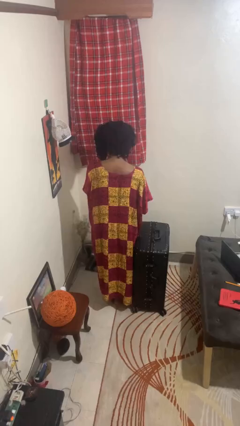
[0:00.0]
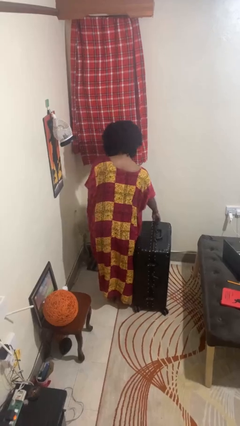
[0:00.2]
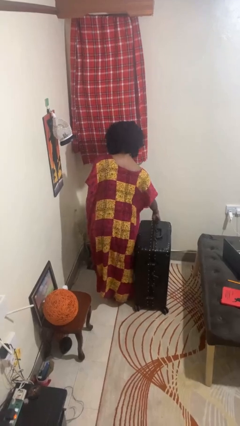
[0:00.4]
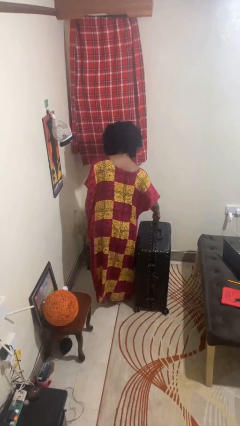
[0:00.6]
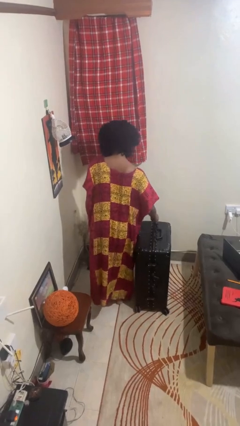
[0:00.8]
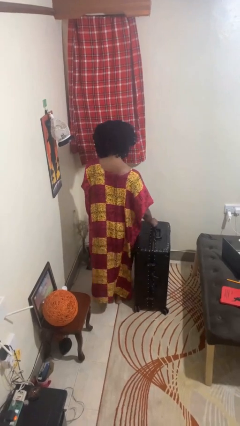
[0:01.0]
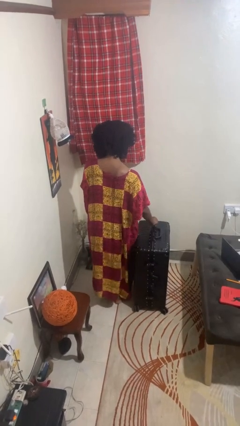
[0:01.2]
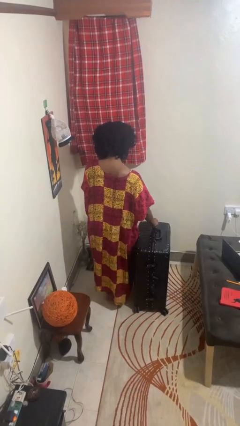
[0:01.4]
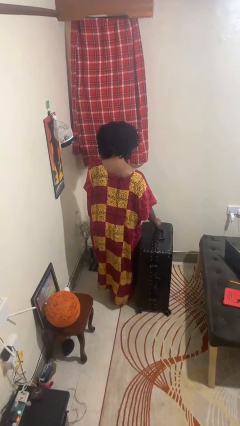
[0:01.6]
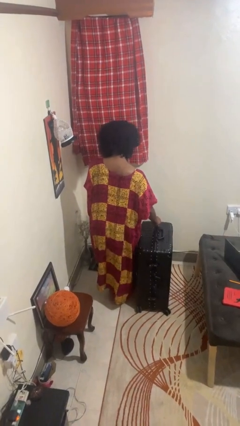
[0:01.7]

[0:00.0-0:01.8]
person opens suitcase

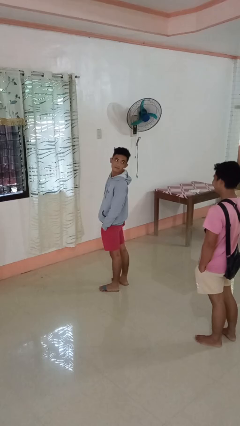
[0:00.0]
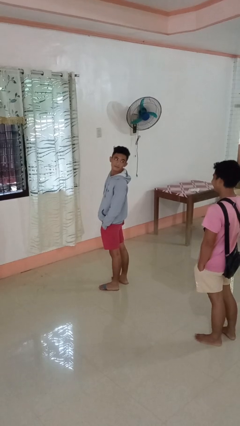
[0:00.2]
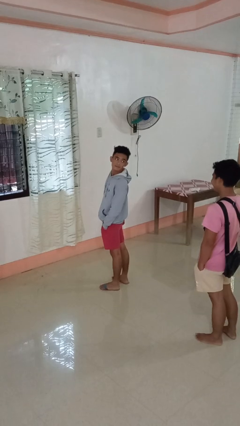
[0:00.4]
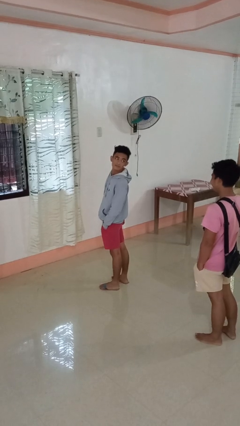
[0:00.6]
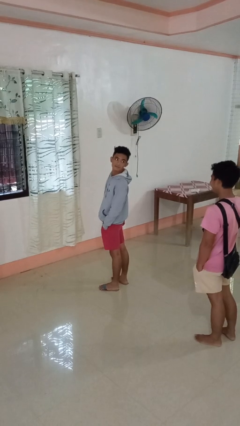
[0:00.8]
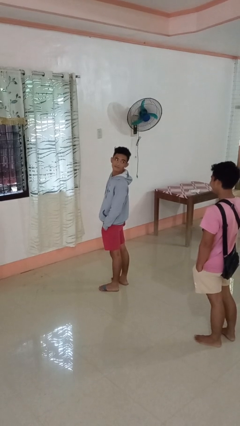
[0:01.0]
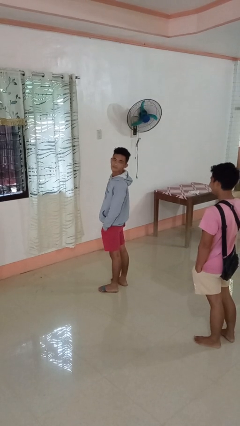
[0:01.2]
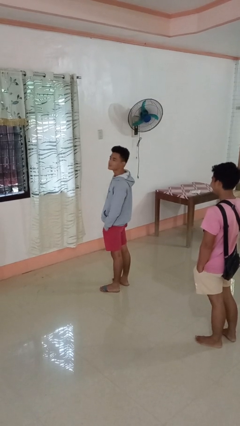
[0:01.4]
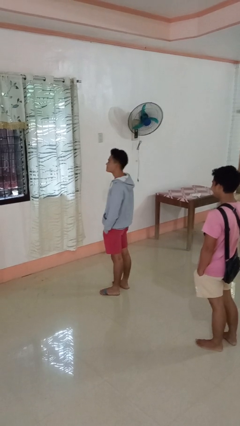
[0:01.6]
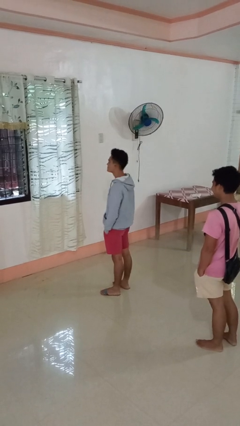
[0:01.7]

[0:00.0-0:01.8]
person looks over shoulder

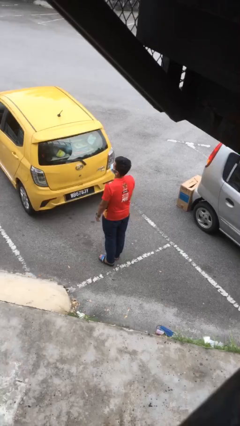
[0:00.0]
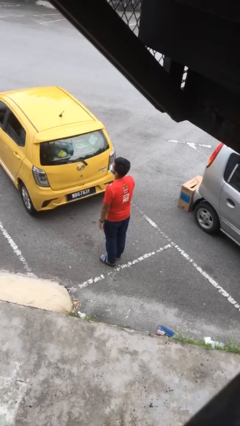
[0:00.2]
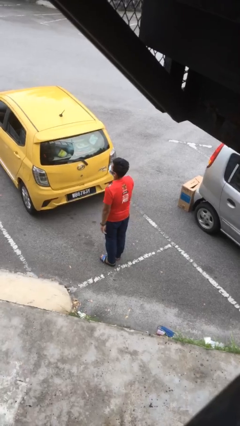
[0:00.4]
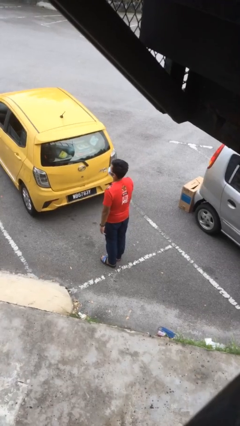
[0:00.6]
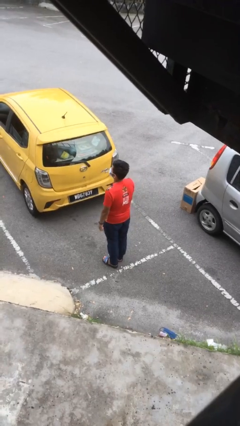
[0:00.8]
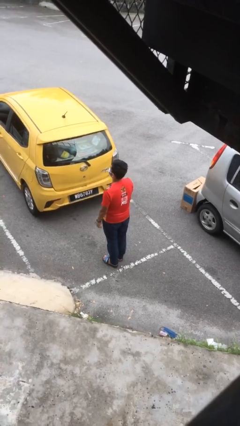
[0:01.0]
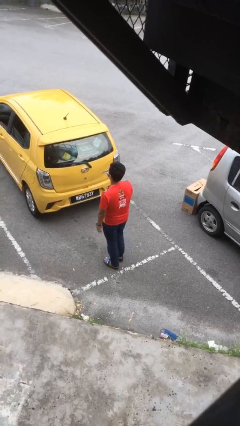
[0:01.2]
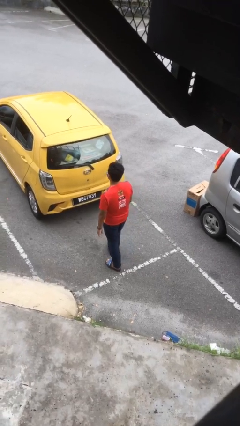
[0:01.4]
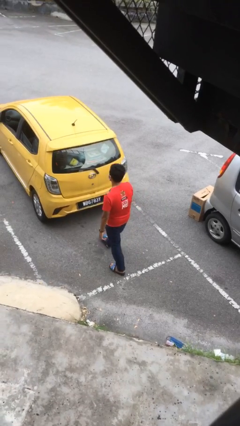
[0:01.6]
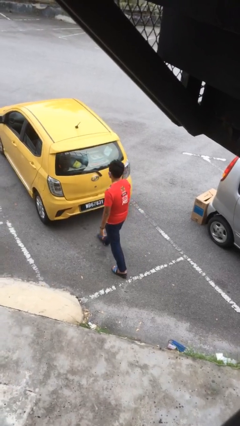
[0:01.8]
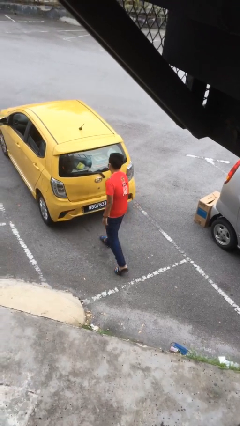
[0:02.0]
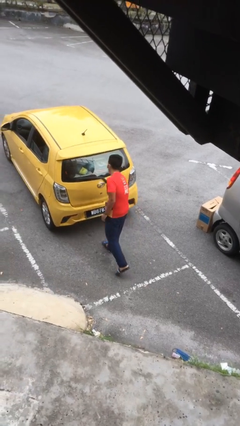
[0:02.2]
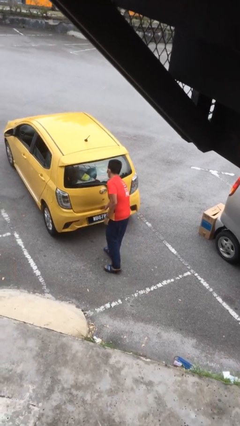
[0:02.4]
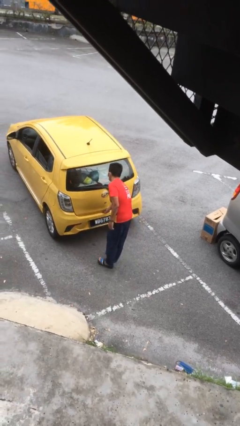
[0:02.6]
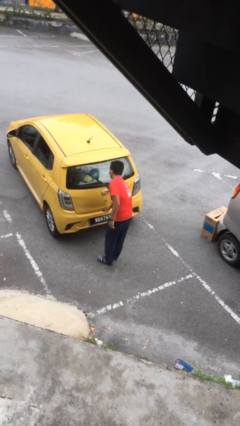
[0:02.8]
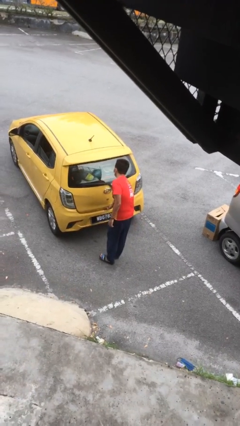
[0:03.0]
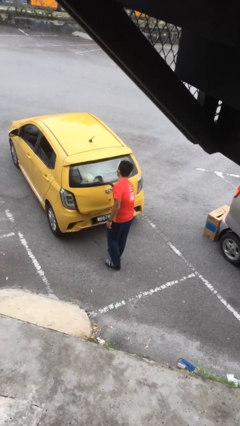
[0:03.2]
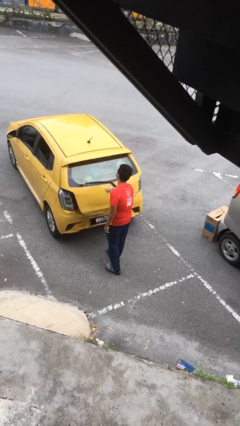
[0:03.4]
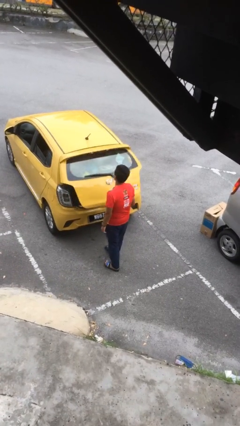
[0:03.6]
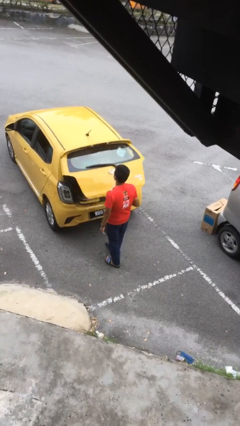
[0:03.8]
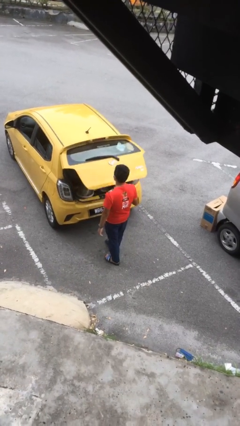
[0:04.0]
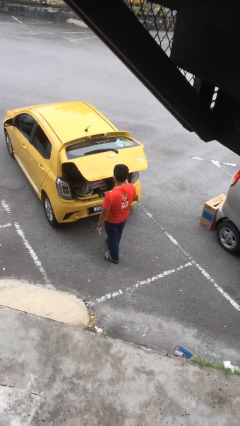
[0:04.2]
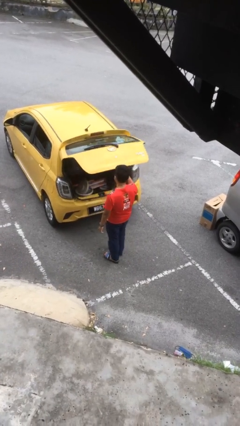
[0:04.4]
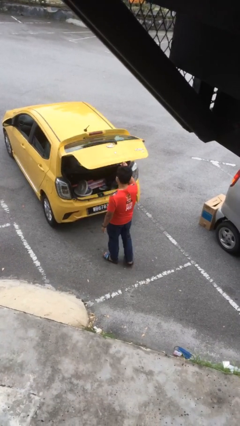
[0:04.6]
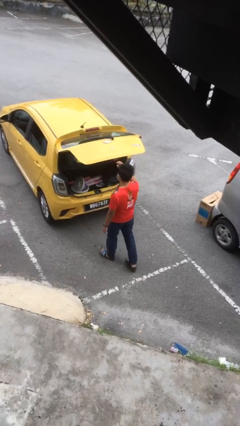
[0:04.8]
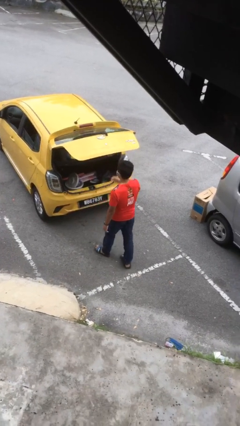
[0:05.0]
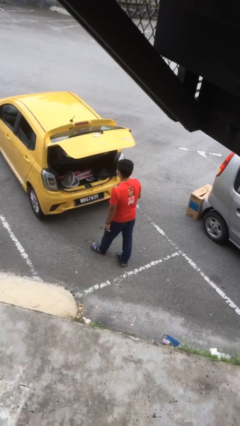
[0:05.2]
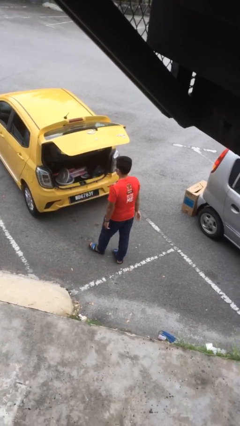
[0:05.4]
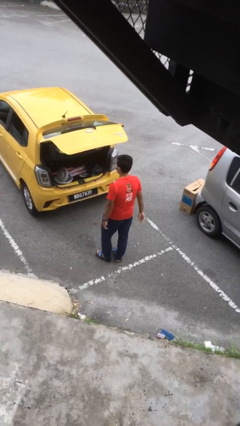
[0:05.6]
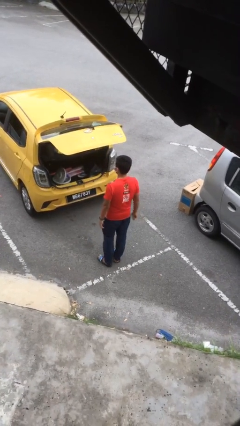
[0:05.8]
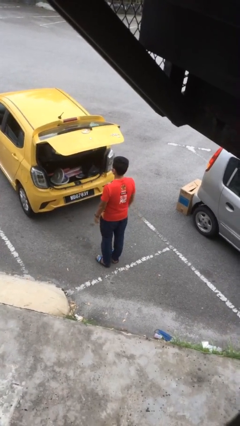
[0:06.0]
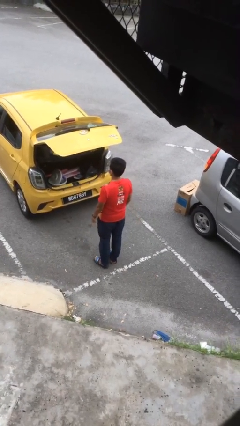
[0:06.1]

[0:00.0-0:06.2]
person opens car trunk

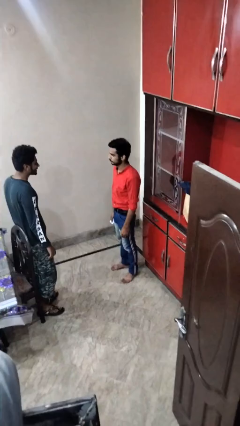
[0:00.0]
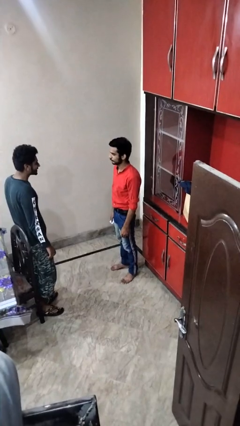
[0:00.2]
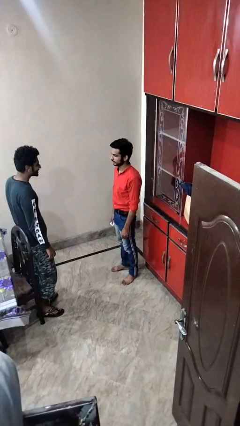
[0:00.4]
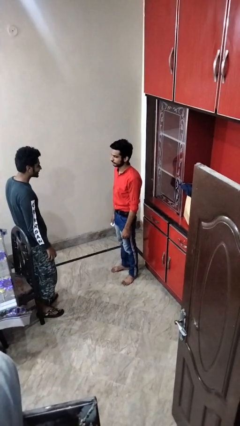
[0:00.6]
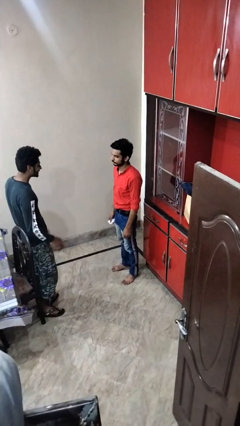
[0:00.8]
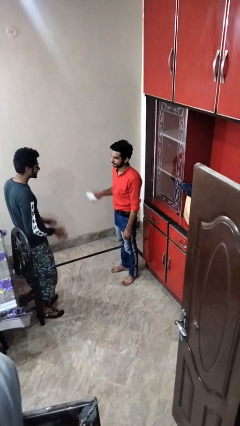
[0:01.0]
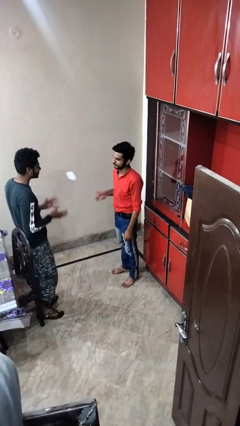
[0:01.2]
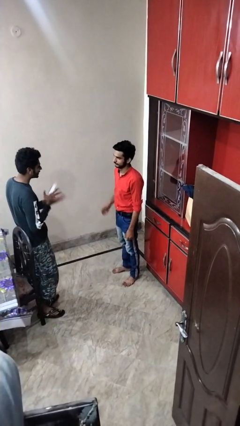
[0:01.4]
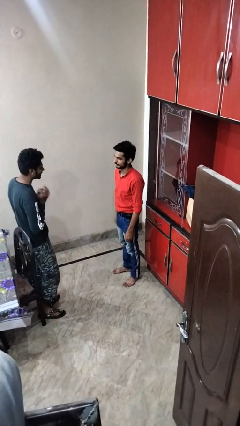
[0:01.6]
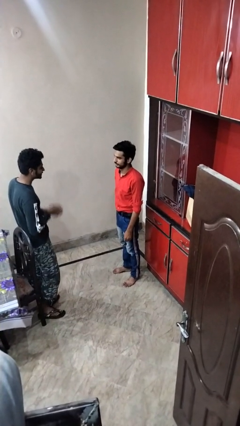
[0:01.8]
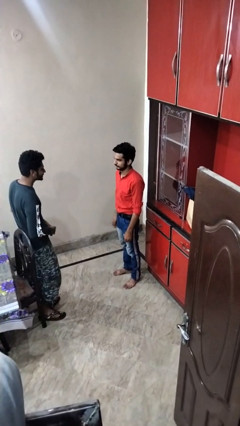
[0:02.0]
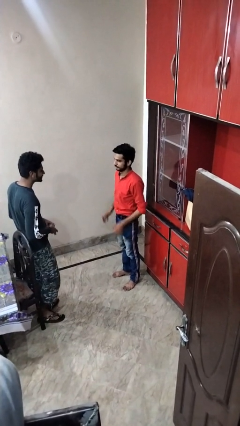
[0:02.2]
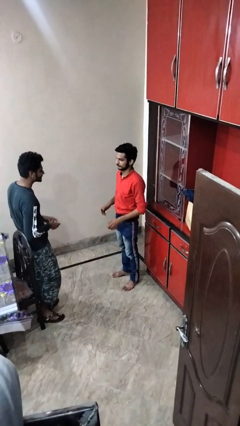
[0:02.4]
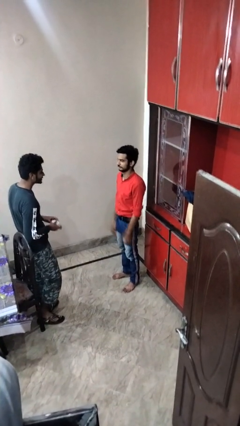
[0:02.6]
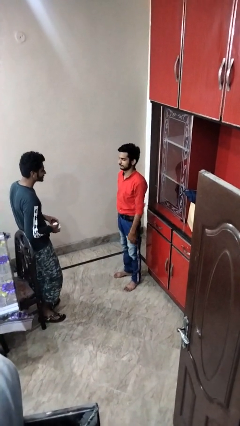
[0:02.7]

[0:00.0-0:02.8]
person throws object to person

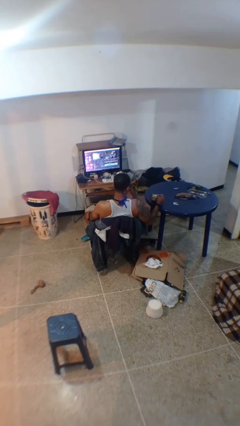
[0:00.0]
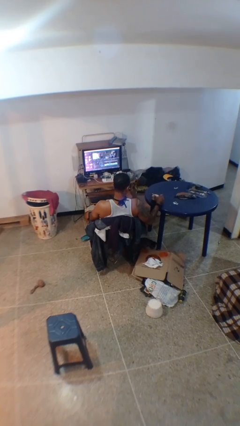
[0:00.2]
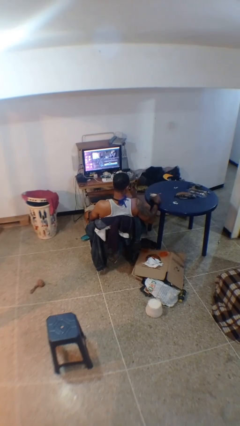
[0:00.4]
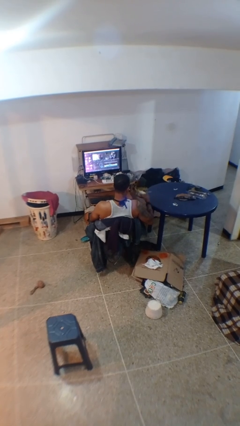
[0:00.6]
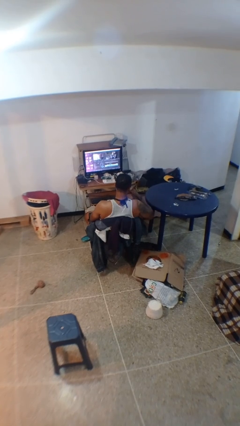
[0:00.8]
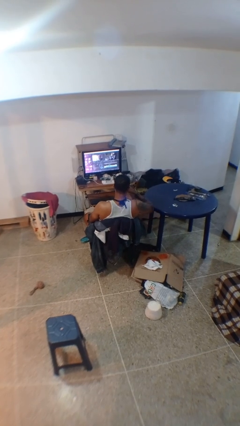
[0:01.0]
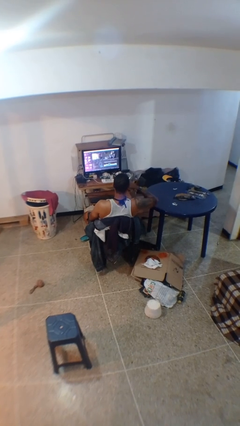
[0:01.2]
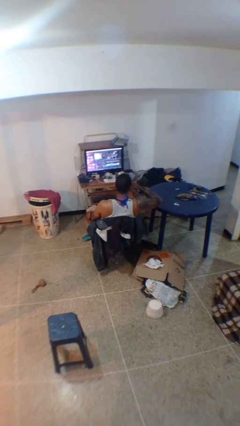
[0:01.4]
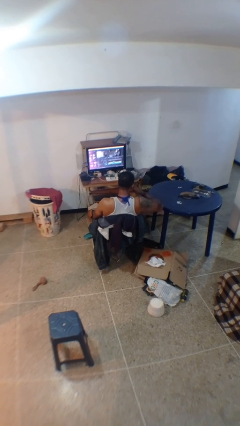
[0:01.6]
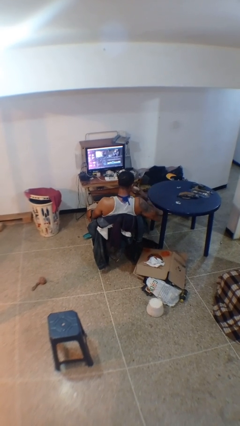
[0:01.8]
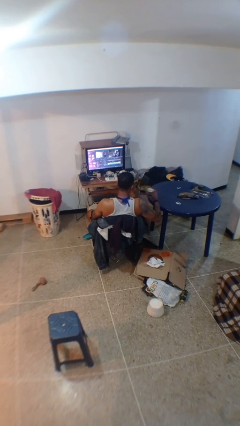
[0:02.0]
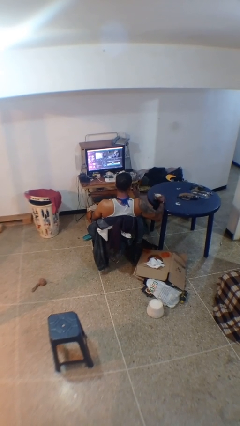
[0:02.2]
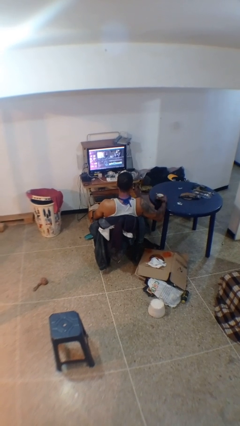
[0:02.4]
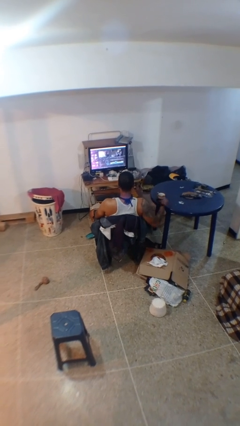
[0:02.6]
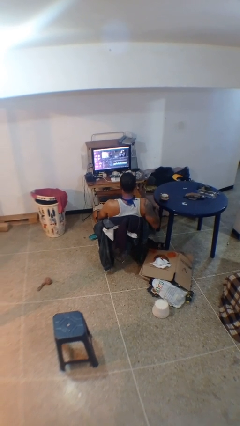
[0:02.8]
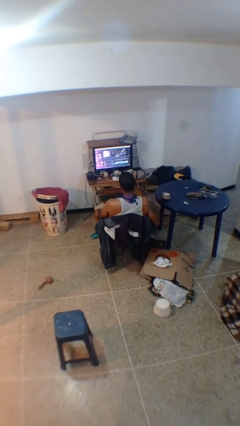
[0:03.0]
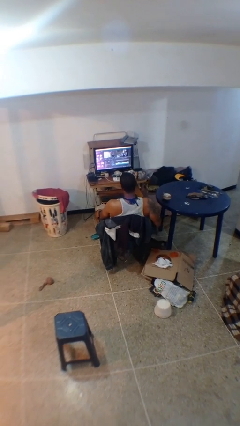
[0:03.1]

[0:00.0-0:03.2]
person drinks from mug

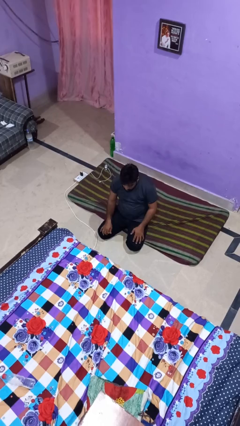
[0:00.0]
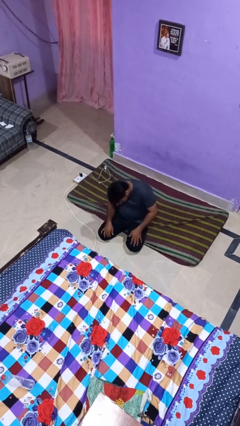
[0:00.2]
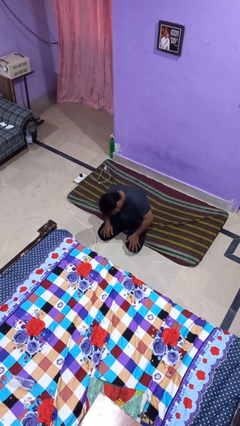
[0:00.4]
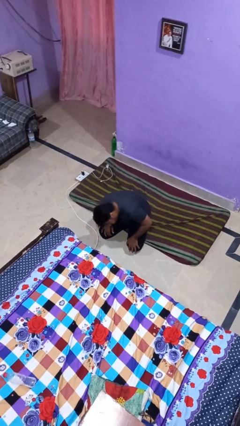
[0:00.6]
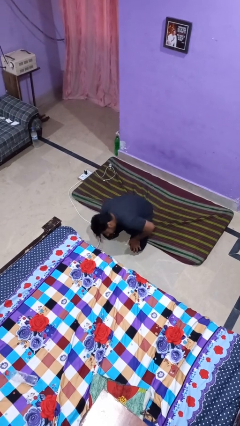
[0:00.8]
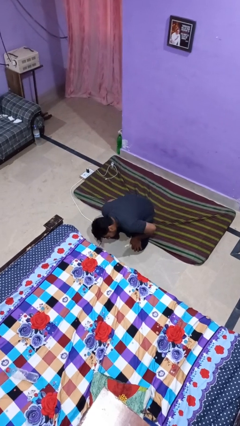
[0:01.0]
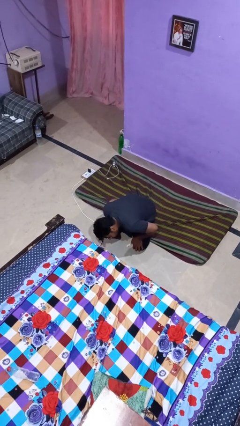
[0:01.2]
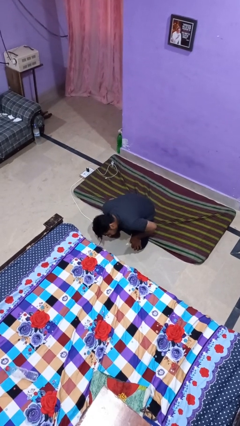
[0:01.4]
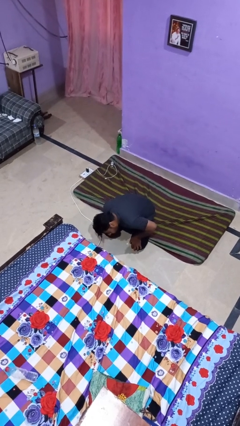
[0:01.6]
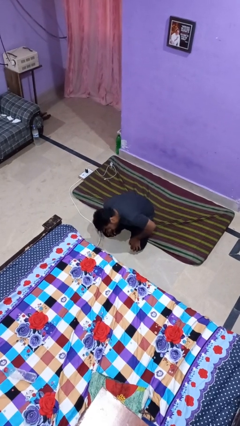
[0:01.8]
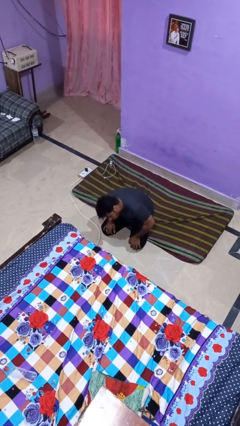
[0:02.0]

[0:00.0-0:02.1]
person searches under bed
